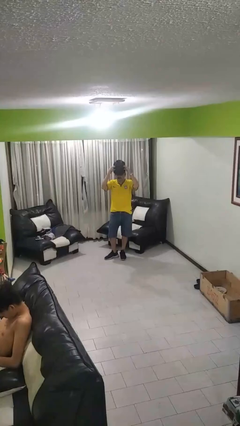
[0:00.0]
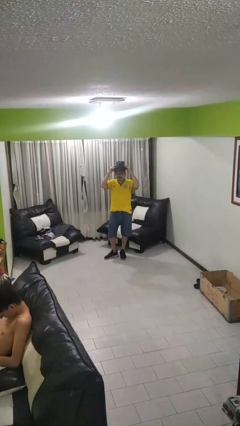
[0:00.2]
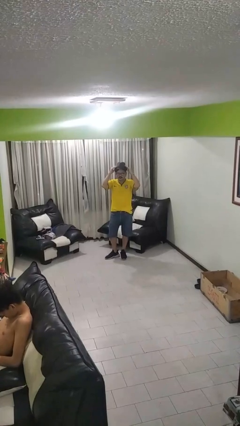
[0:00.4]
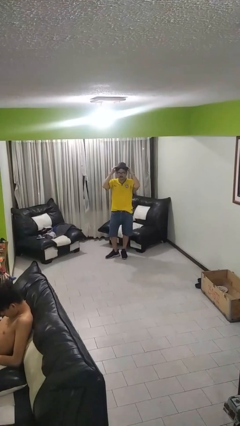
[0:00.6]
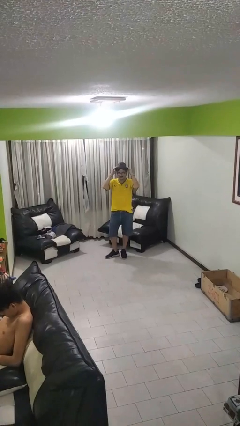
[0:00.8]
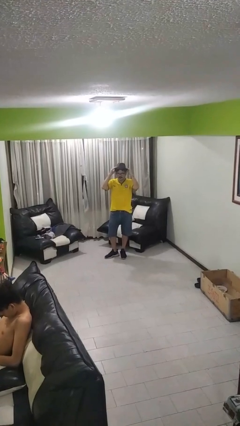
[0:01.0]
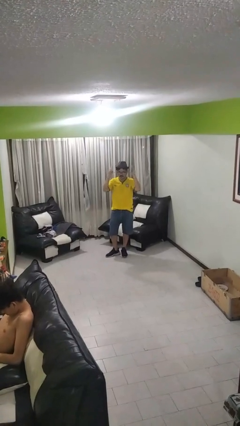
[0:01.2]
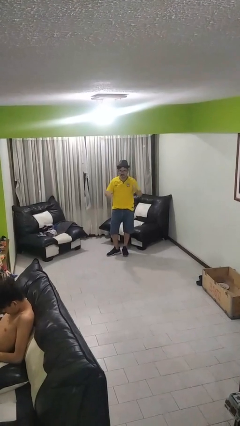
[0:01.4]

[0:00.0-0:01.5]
person puts on hat

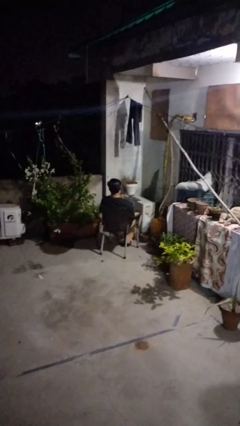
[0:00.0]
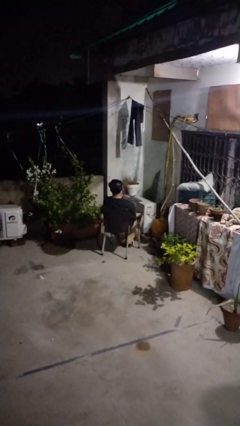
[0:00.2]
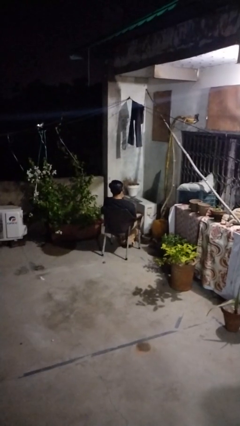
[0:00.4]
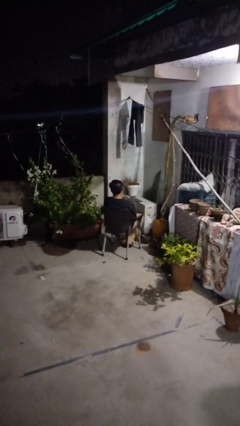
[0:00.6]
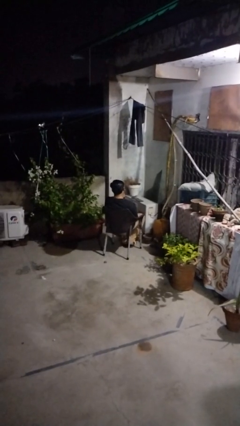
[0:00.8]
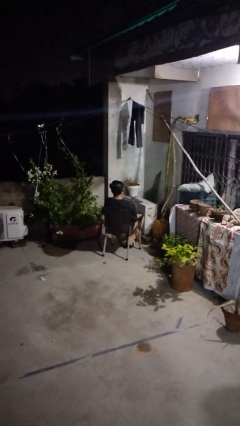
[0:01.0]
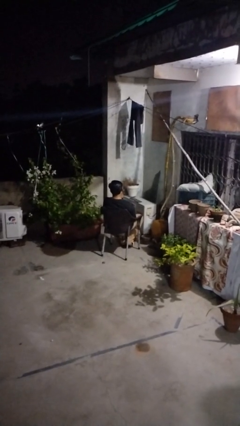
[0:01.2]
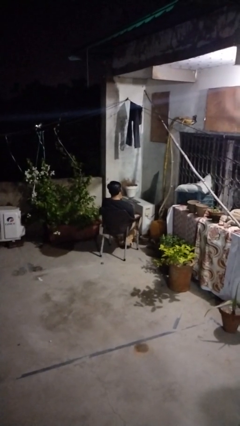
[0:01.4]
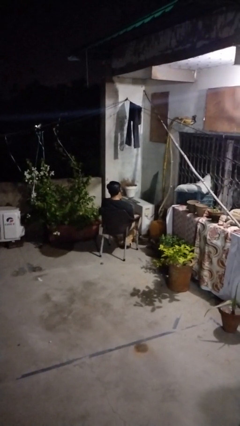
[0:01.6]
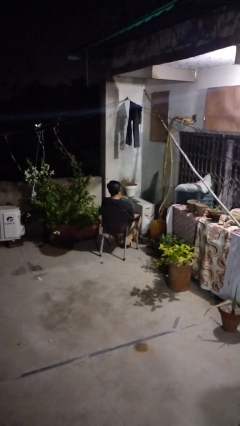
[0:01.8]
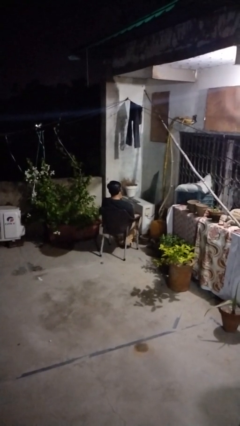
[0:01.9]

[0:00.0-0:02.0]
person strokes chin

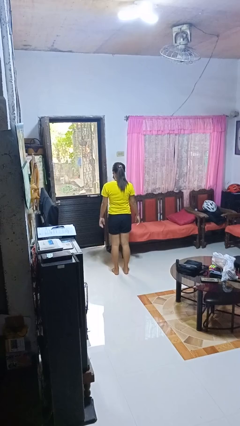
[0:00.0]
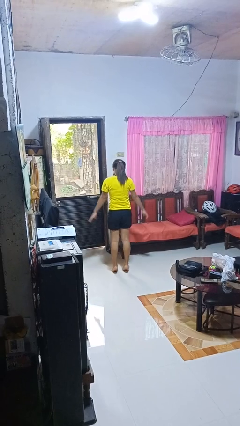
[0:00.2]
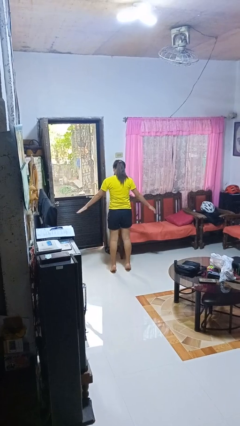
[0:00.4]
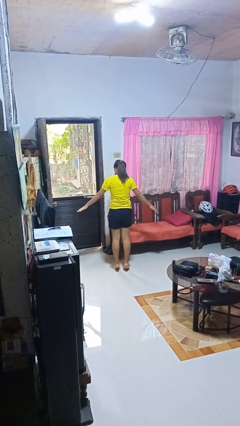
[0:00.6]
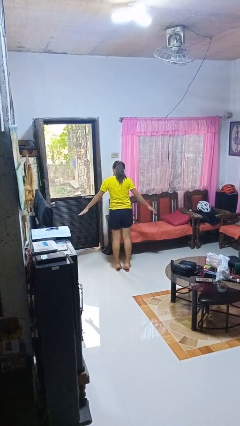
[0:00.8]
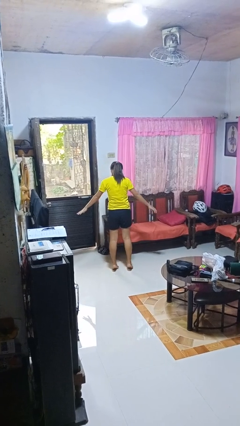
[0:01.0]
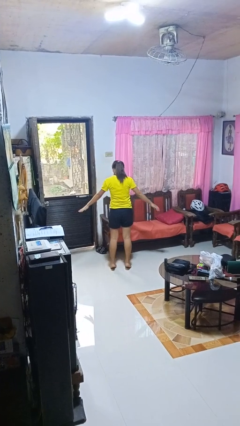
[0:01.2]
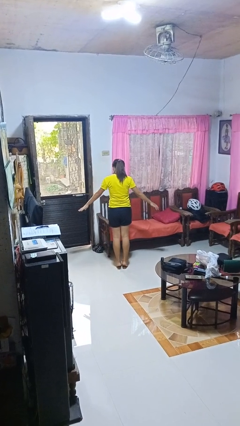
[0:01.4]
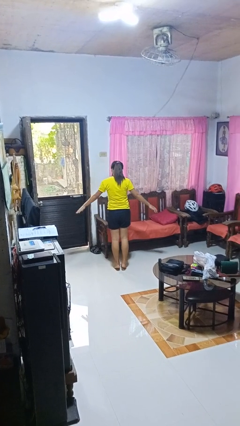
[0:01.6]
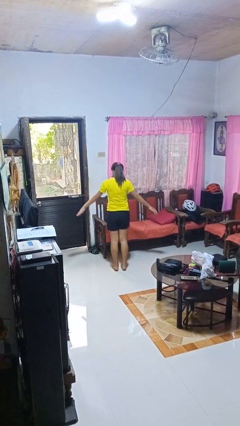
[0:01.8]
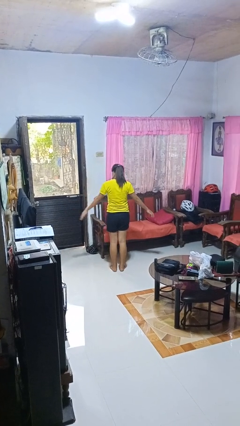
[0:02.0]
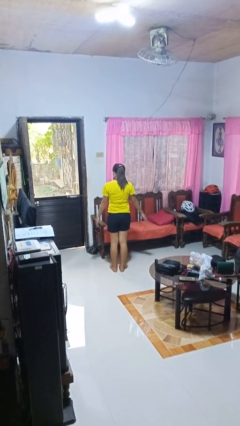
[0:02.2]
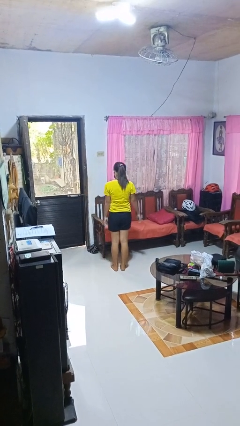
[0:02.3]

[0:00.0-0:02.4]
person walks tiptoe

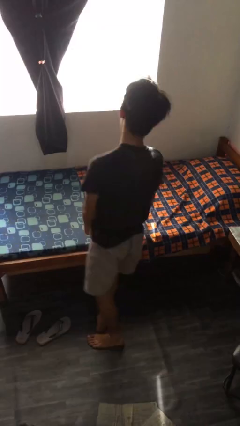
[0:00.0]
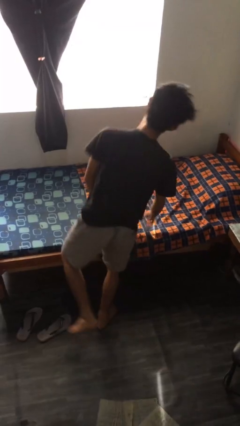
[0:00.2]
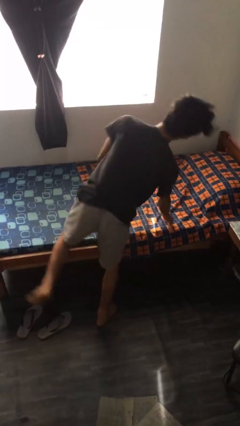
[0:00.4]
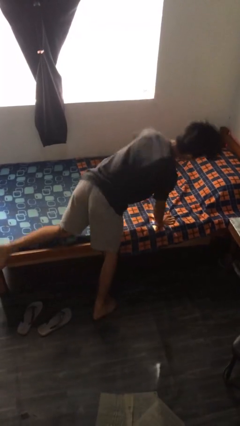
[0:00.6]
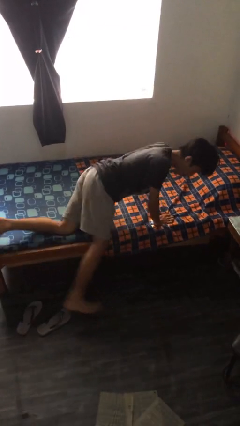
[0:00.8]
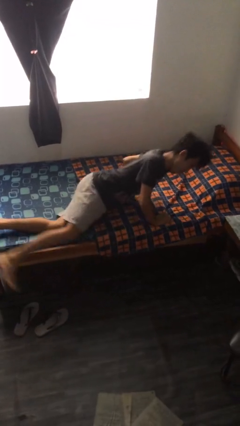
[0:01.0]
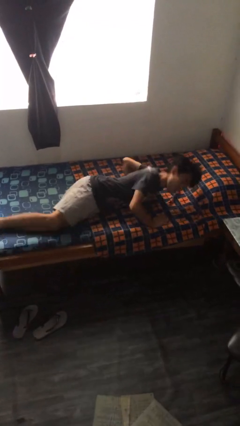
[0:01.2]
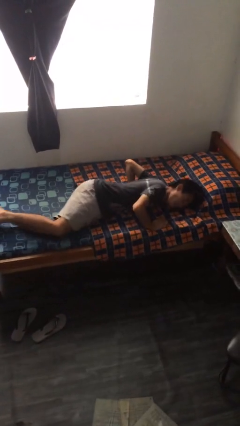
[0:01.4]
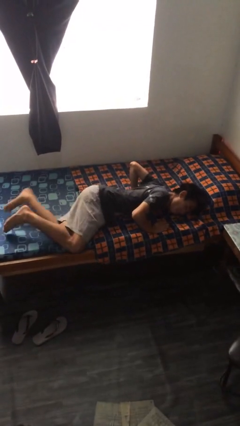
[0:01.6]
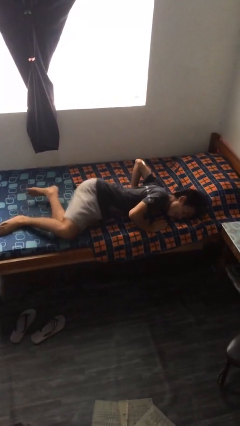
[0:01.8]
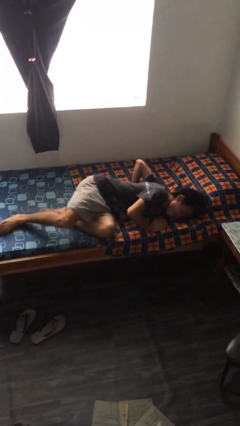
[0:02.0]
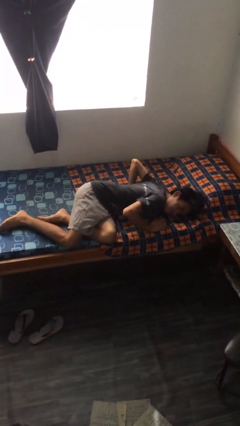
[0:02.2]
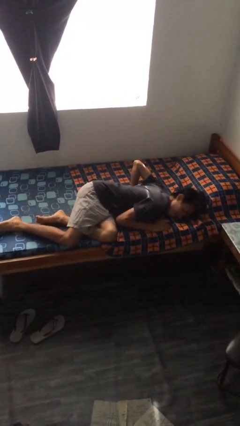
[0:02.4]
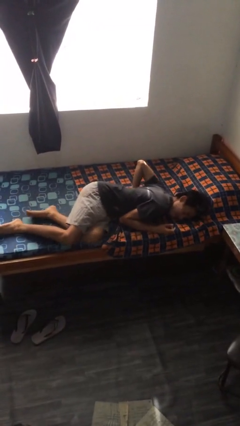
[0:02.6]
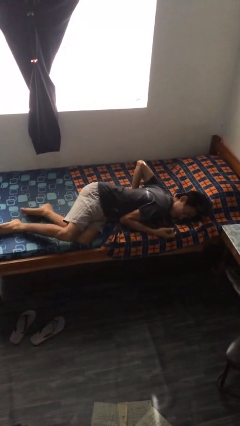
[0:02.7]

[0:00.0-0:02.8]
person lies down on bed

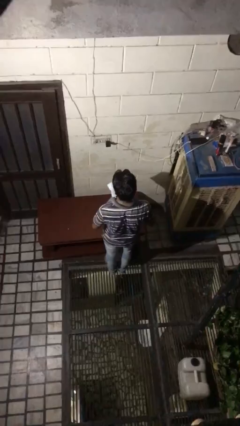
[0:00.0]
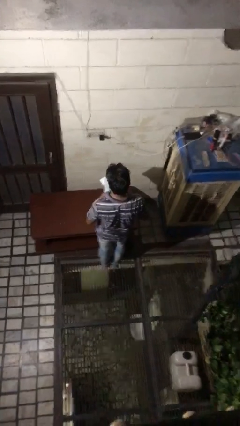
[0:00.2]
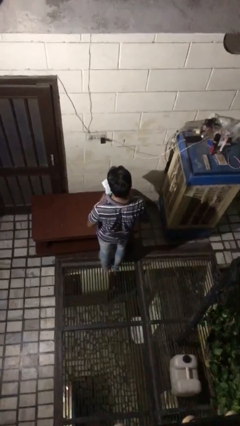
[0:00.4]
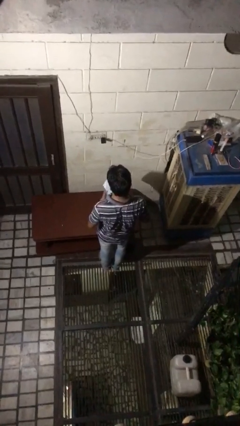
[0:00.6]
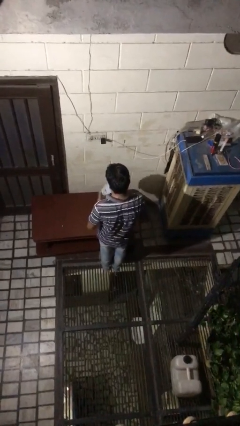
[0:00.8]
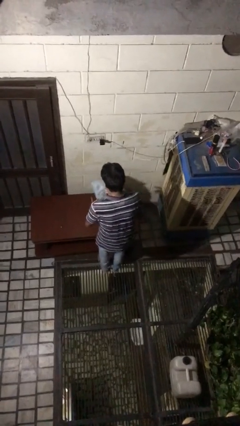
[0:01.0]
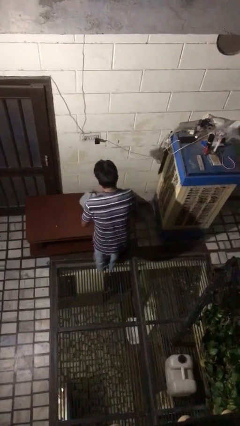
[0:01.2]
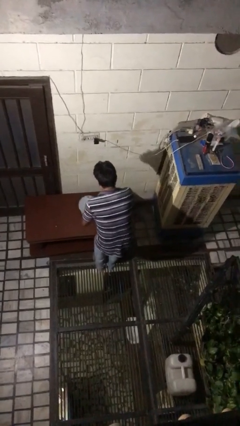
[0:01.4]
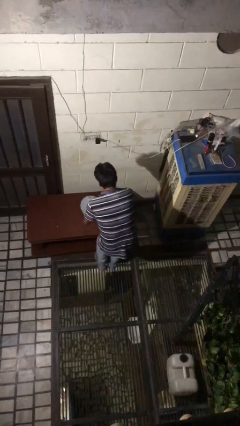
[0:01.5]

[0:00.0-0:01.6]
person throws object on table

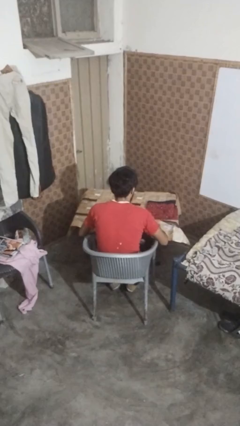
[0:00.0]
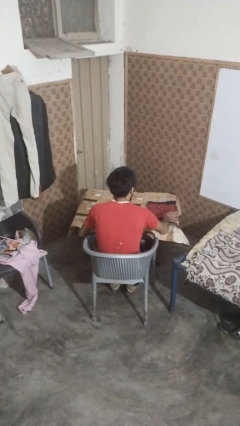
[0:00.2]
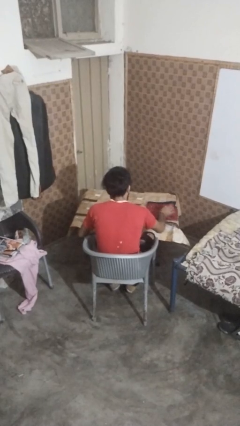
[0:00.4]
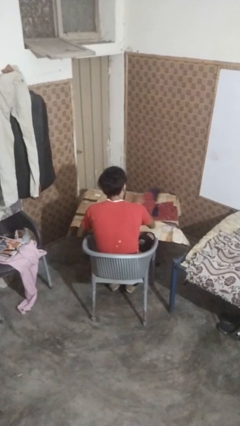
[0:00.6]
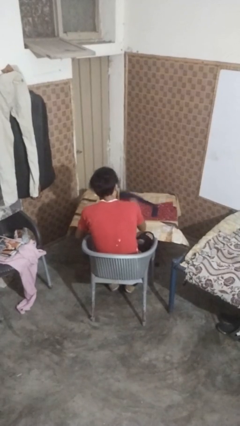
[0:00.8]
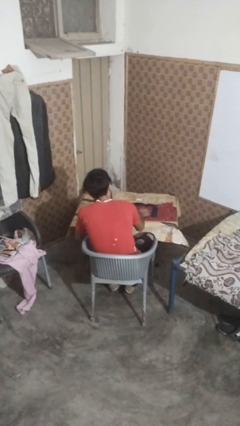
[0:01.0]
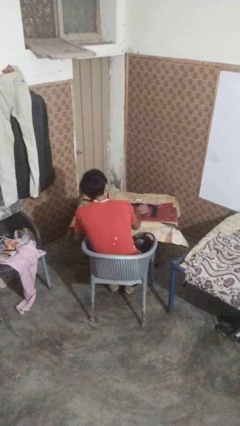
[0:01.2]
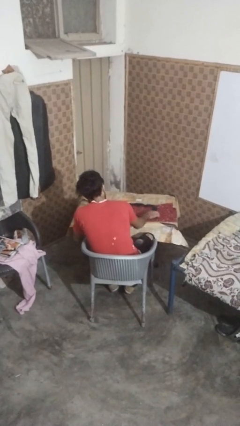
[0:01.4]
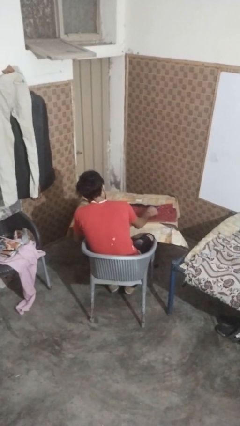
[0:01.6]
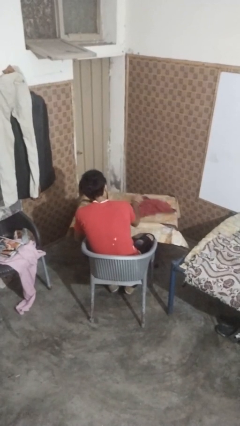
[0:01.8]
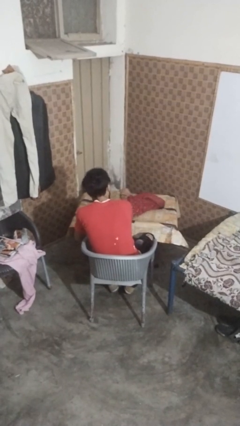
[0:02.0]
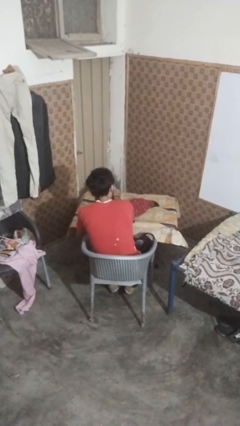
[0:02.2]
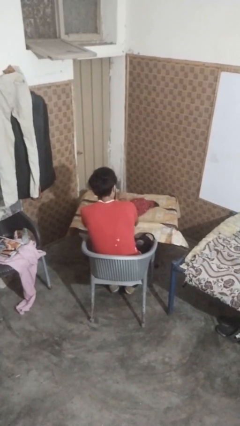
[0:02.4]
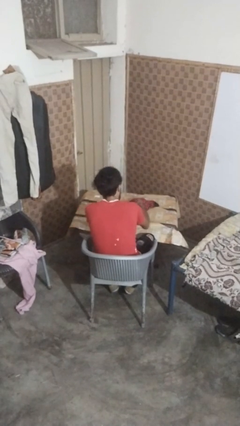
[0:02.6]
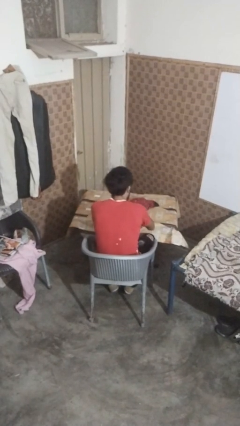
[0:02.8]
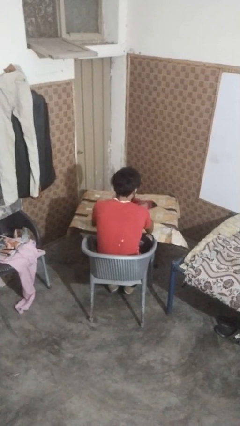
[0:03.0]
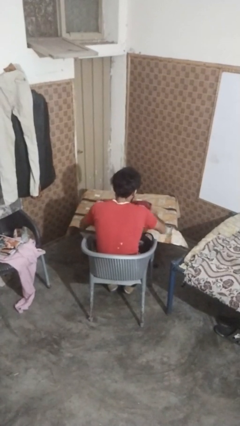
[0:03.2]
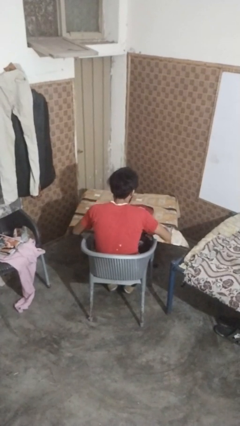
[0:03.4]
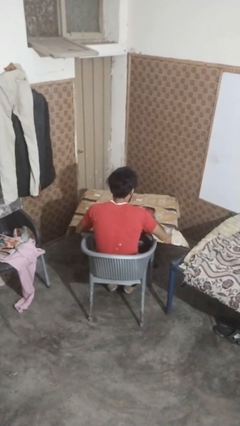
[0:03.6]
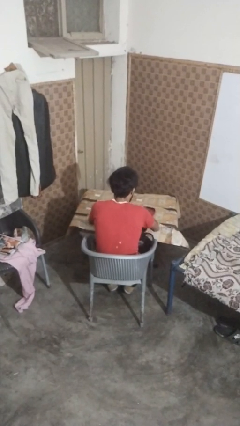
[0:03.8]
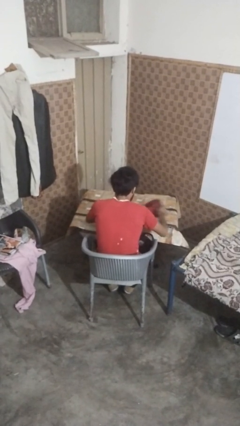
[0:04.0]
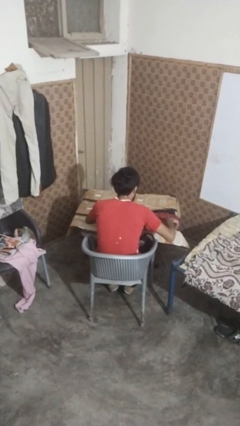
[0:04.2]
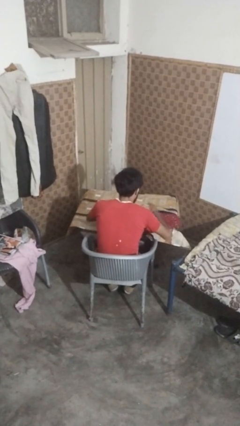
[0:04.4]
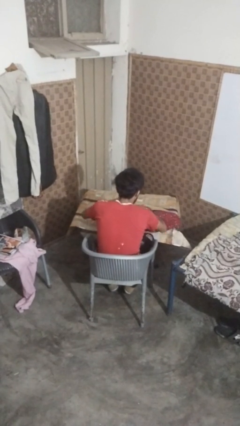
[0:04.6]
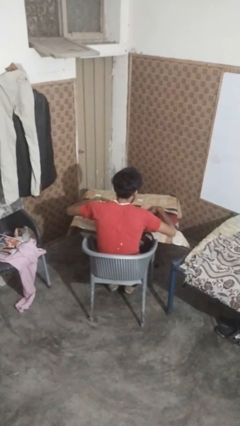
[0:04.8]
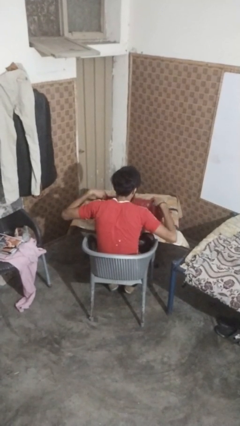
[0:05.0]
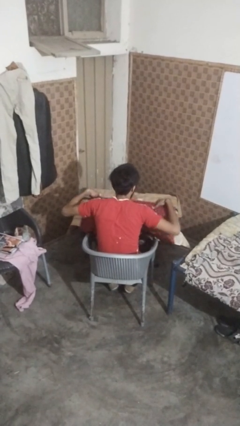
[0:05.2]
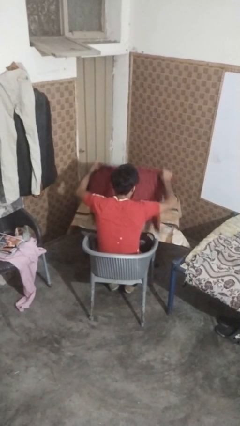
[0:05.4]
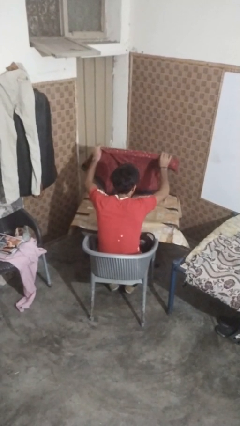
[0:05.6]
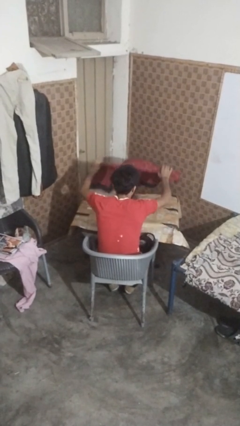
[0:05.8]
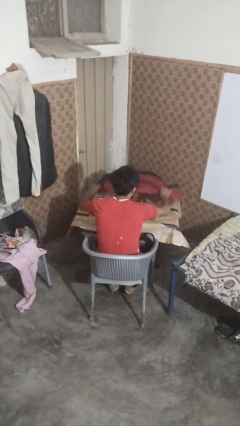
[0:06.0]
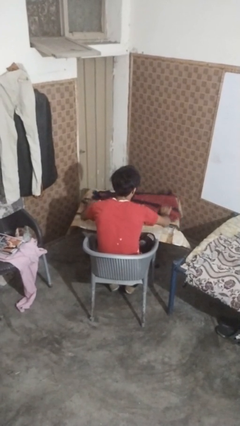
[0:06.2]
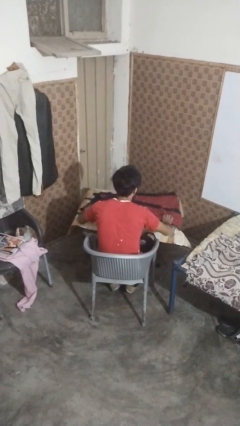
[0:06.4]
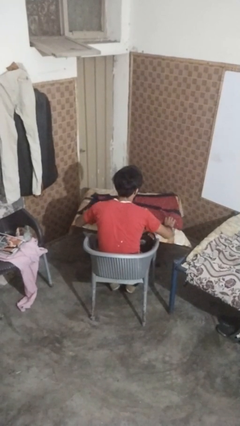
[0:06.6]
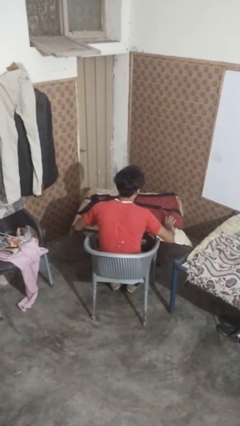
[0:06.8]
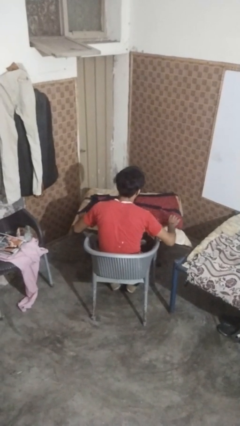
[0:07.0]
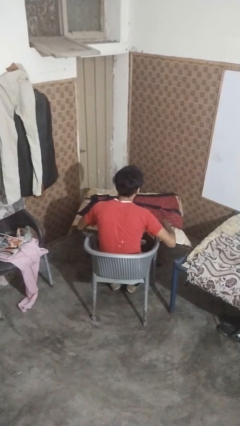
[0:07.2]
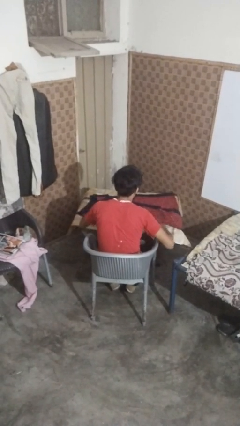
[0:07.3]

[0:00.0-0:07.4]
person spreads tablecloth
